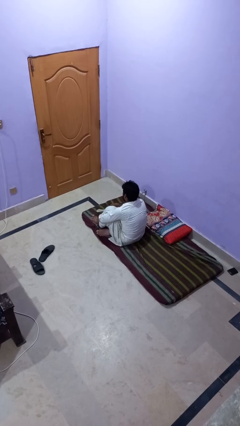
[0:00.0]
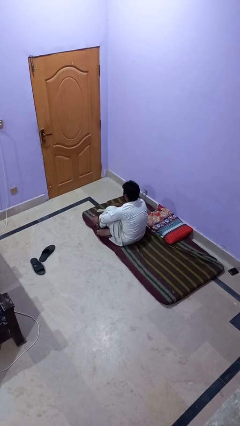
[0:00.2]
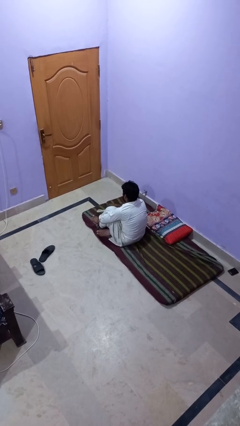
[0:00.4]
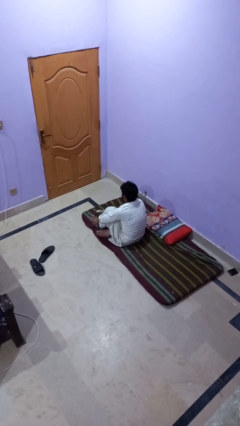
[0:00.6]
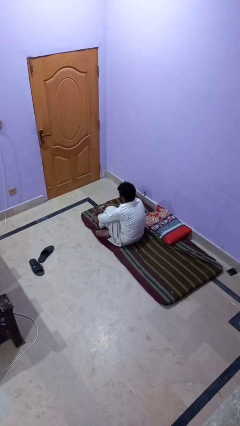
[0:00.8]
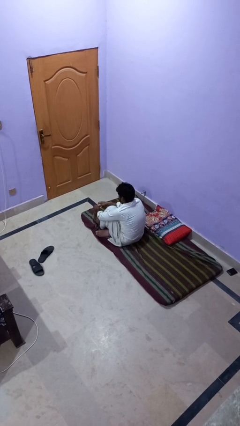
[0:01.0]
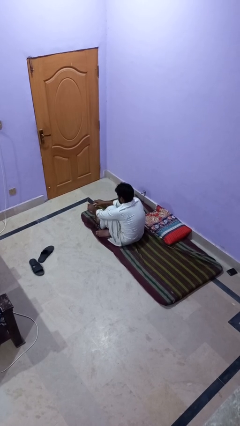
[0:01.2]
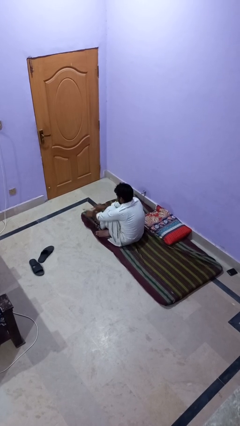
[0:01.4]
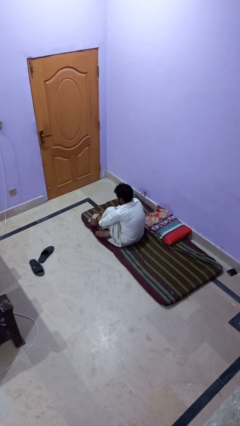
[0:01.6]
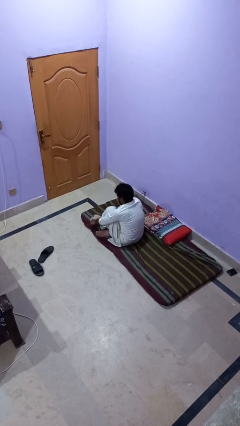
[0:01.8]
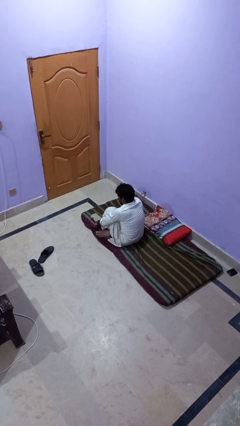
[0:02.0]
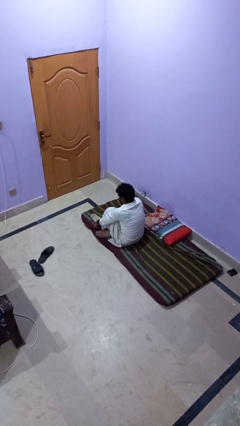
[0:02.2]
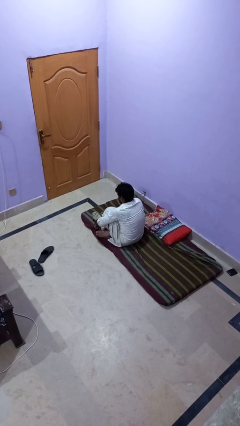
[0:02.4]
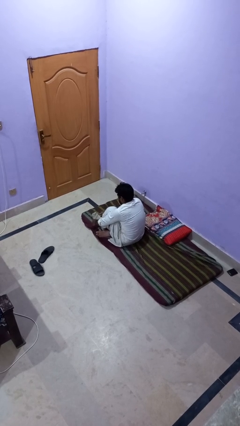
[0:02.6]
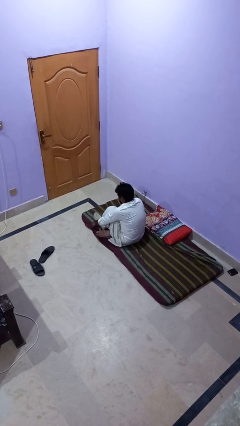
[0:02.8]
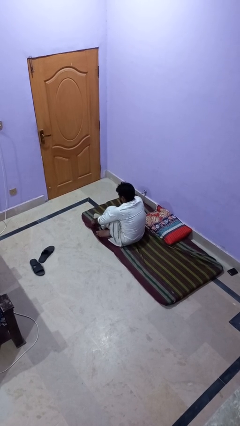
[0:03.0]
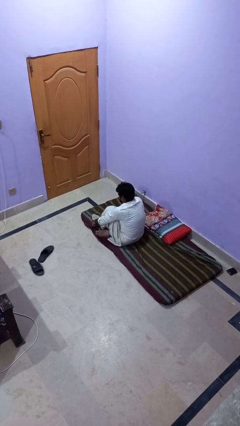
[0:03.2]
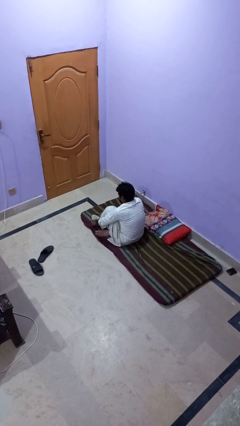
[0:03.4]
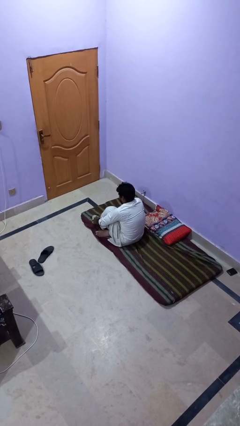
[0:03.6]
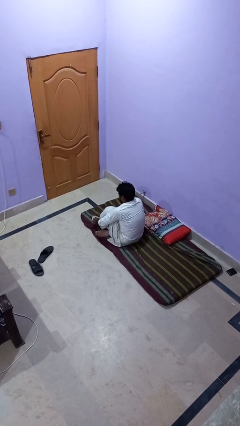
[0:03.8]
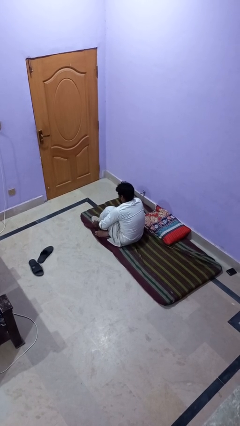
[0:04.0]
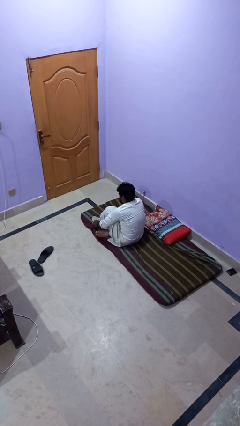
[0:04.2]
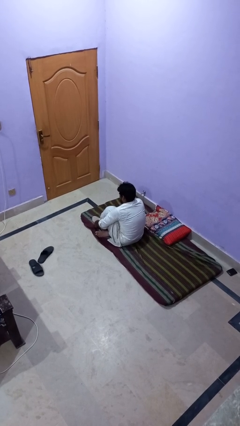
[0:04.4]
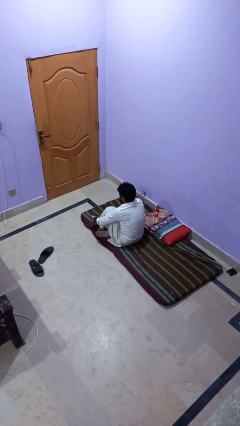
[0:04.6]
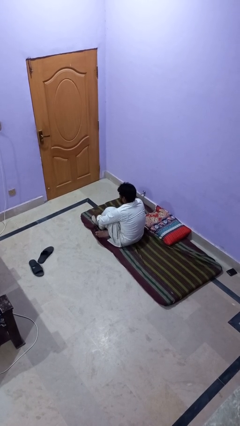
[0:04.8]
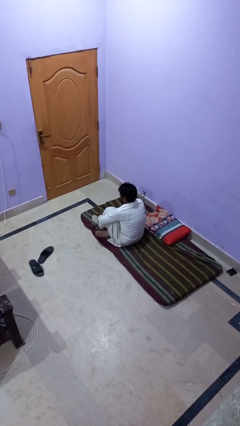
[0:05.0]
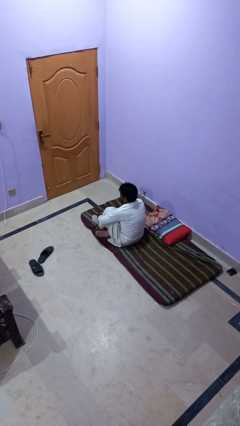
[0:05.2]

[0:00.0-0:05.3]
person puts on socks

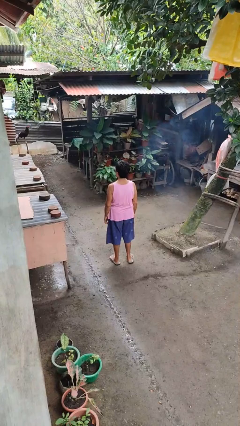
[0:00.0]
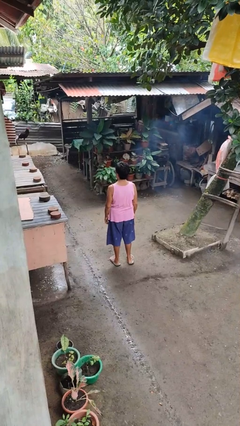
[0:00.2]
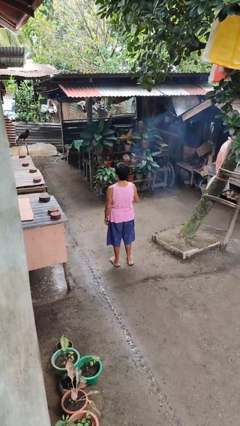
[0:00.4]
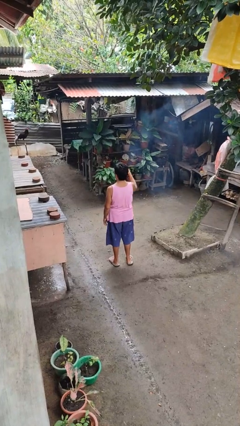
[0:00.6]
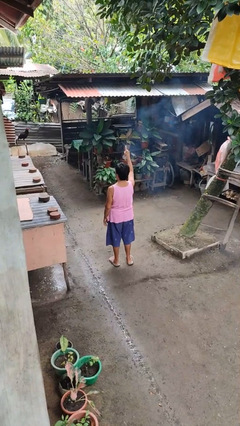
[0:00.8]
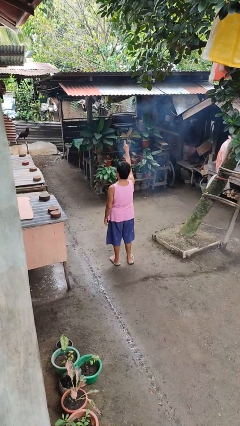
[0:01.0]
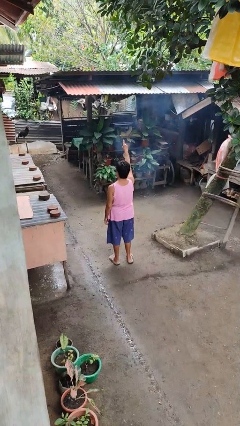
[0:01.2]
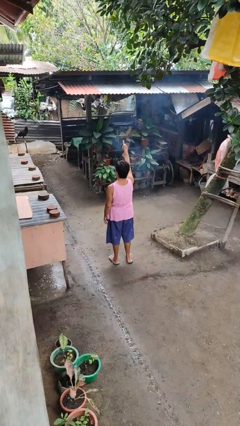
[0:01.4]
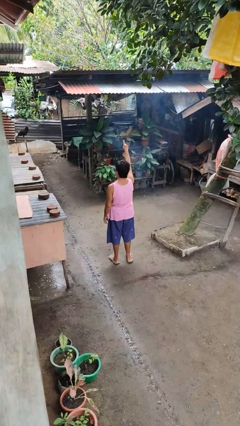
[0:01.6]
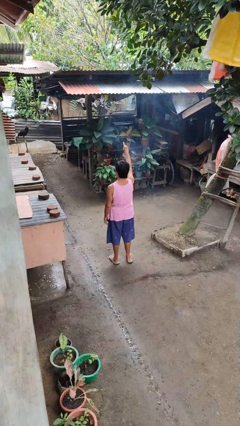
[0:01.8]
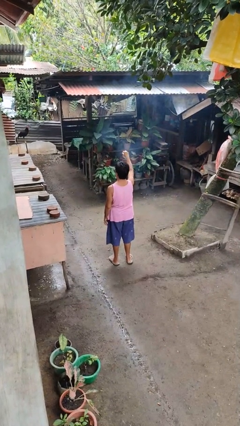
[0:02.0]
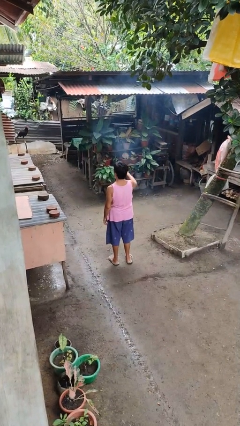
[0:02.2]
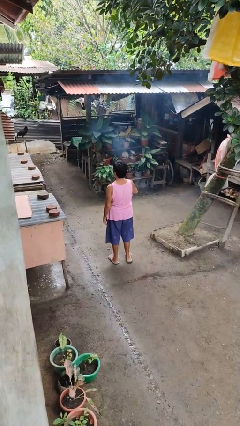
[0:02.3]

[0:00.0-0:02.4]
person points at person

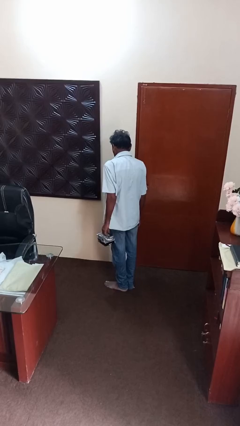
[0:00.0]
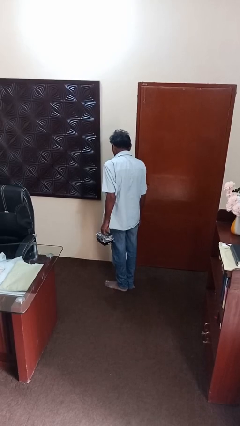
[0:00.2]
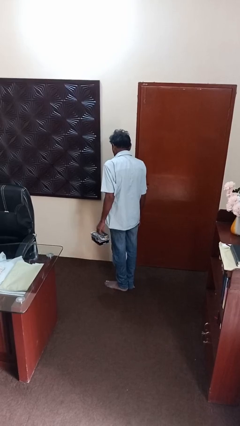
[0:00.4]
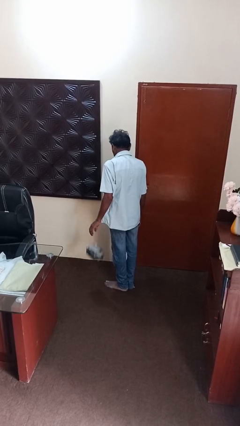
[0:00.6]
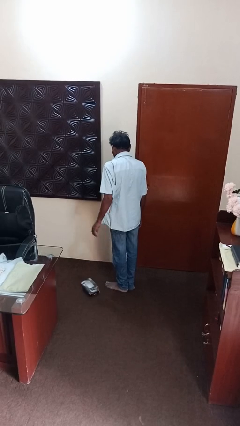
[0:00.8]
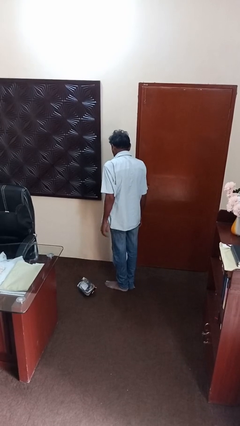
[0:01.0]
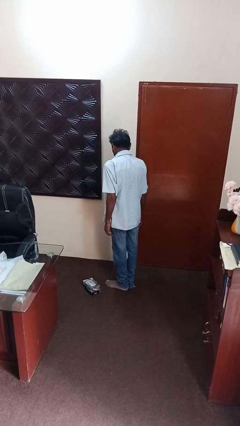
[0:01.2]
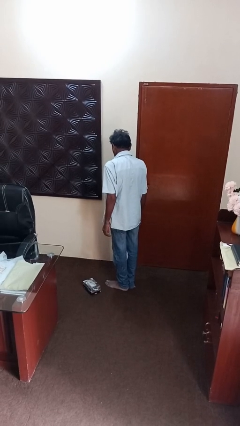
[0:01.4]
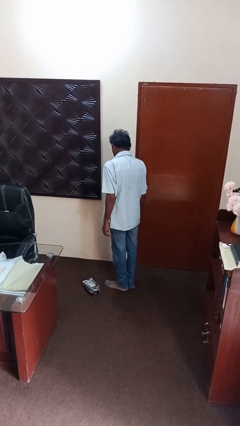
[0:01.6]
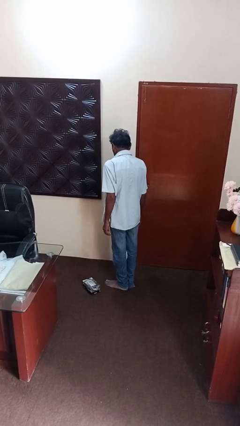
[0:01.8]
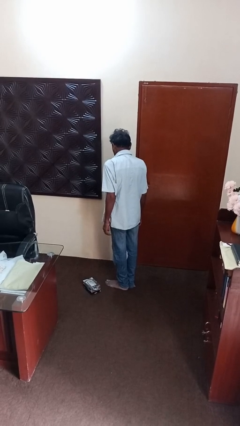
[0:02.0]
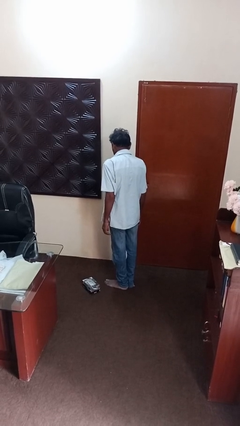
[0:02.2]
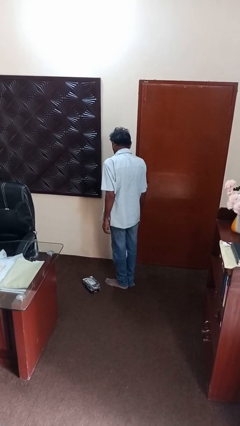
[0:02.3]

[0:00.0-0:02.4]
person throws object to ground

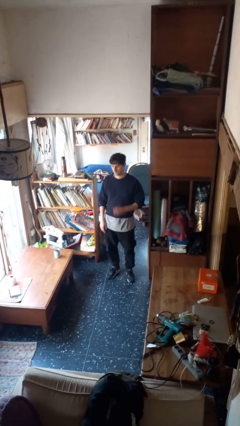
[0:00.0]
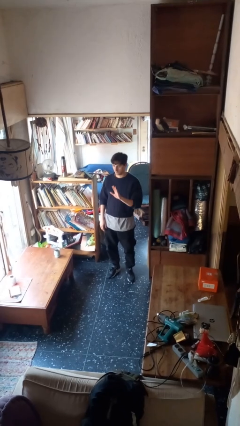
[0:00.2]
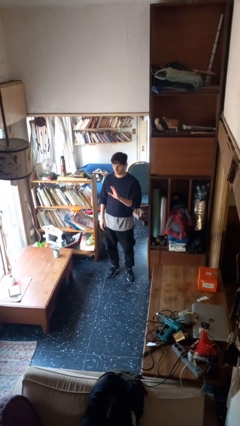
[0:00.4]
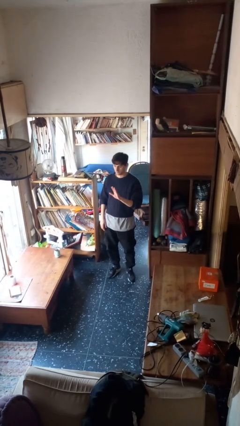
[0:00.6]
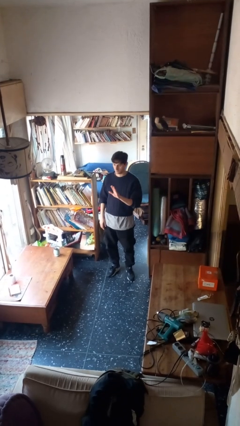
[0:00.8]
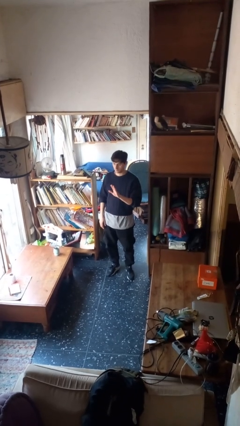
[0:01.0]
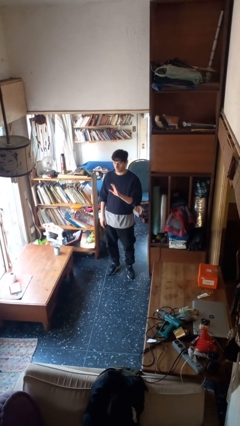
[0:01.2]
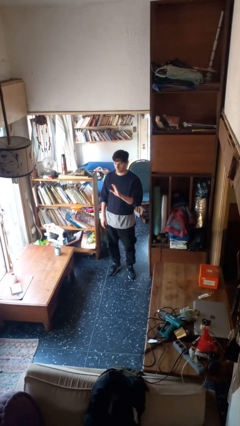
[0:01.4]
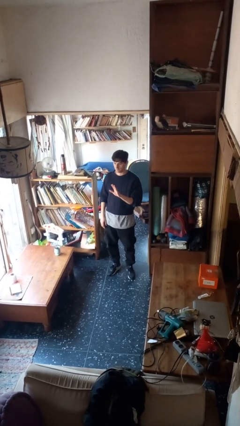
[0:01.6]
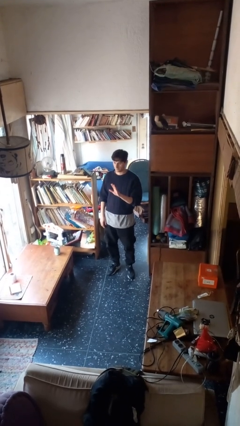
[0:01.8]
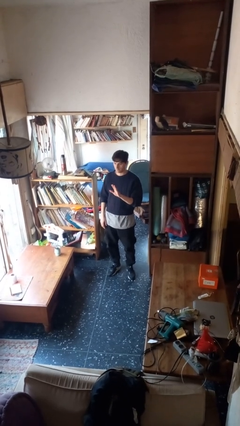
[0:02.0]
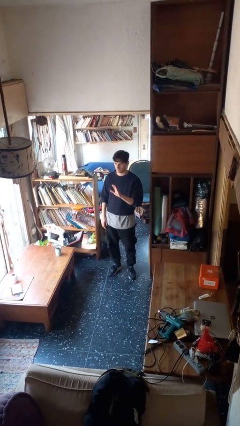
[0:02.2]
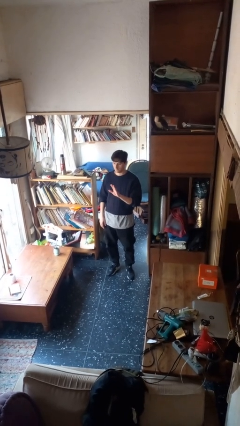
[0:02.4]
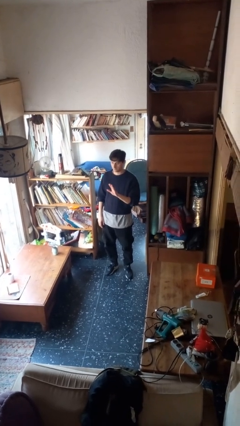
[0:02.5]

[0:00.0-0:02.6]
person gestures number five

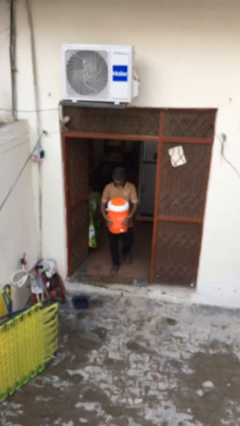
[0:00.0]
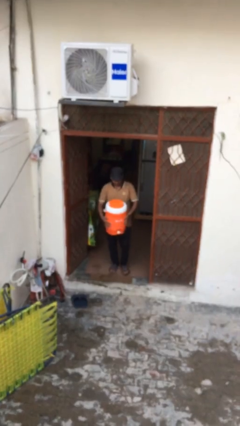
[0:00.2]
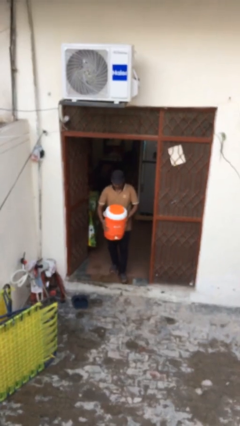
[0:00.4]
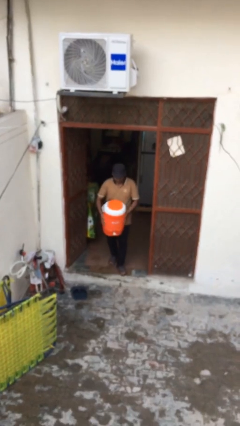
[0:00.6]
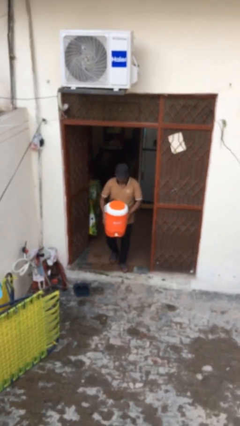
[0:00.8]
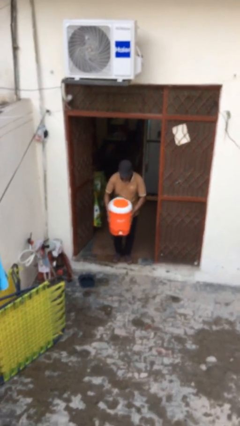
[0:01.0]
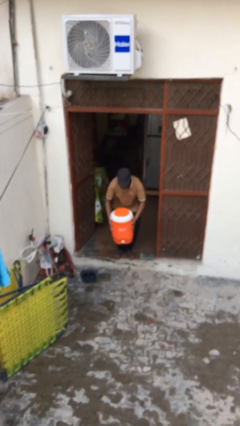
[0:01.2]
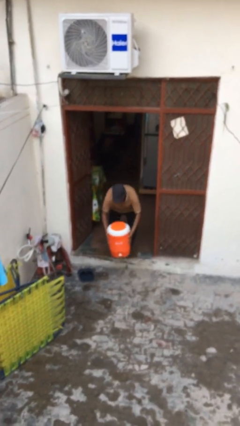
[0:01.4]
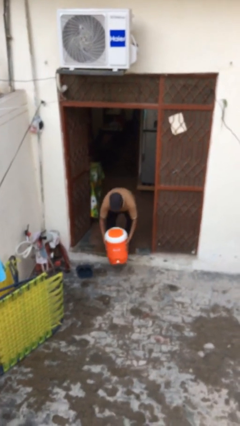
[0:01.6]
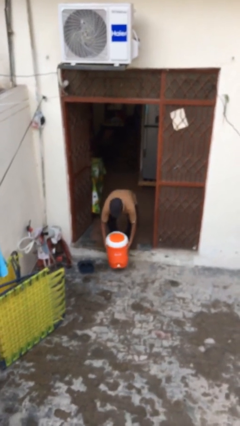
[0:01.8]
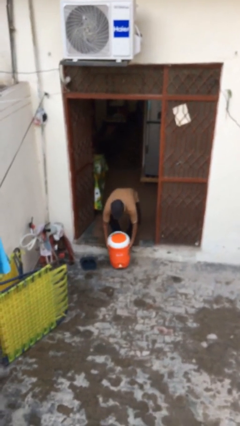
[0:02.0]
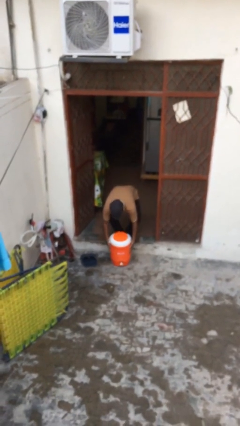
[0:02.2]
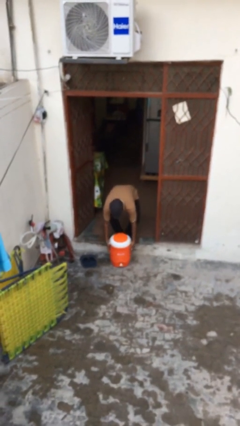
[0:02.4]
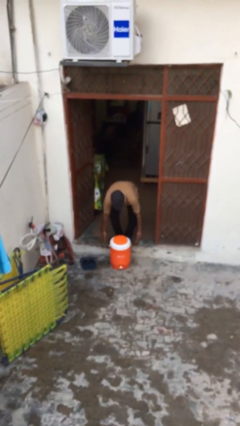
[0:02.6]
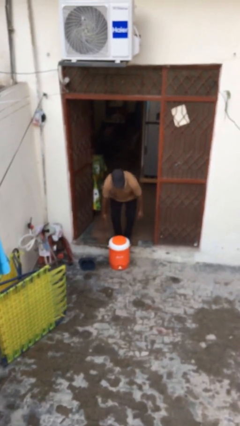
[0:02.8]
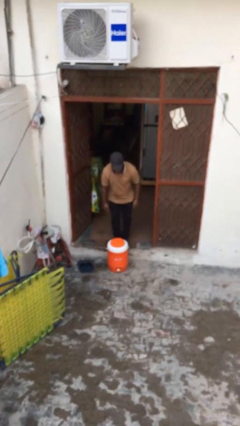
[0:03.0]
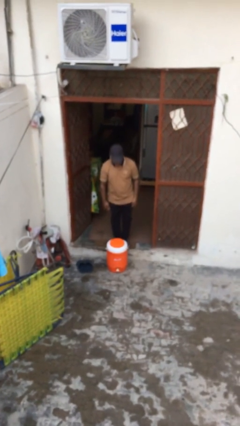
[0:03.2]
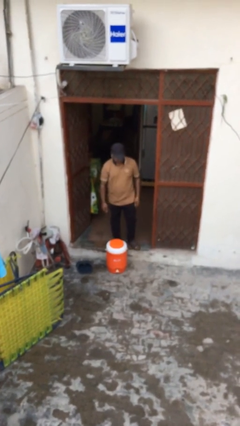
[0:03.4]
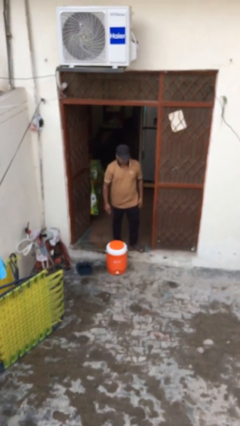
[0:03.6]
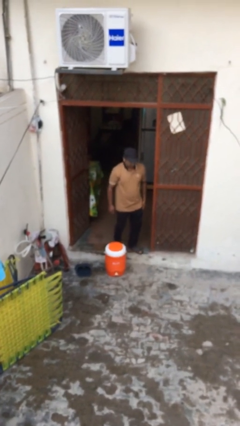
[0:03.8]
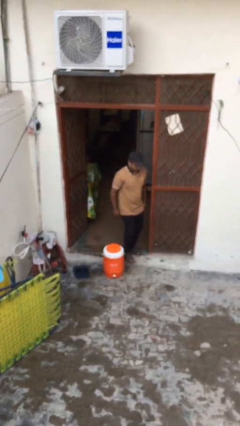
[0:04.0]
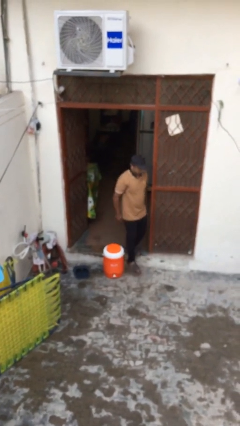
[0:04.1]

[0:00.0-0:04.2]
person puts down object on floor

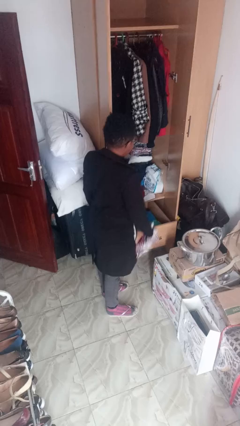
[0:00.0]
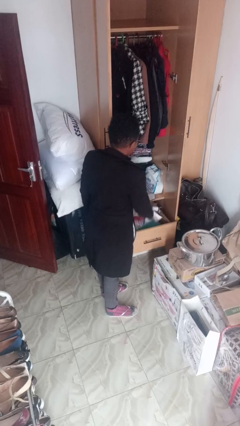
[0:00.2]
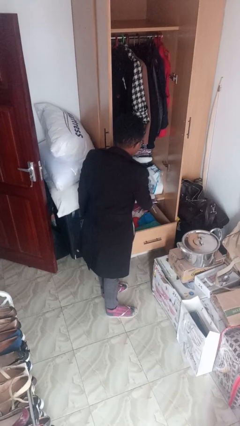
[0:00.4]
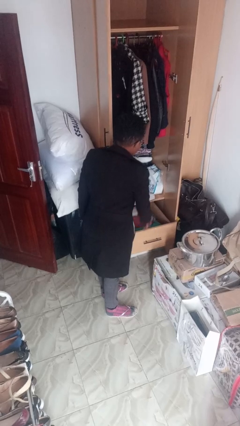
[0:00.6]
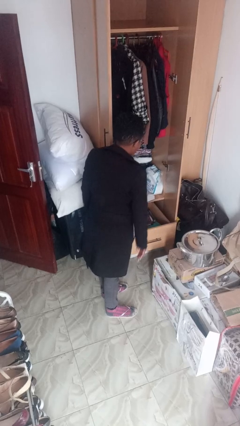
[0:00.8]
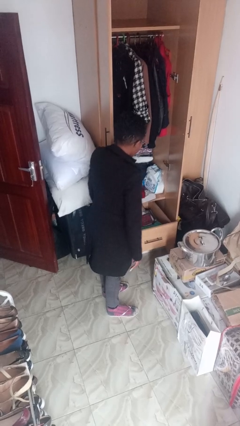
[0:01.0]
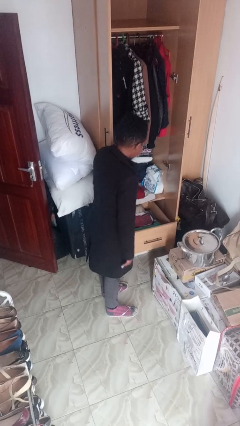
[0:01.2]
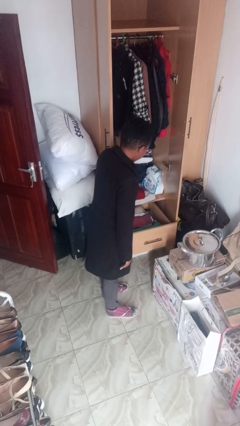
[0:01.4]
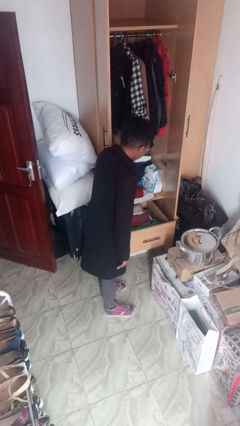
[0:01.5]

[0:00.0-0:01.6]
person puts clothes into dresser
